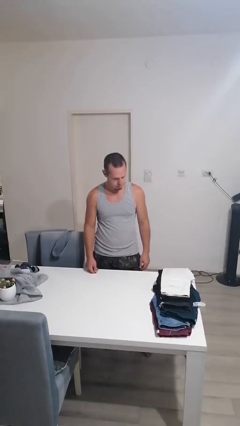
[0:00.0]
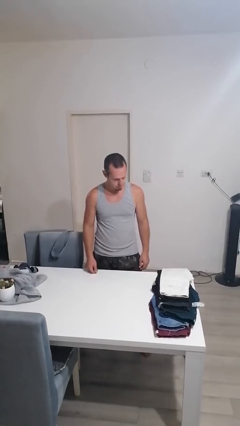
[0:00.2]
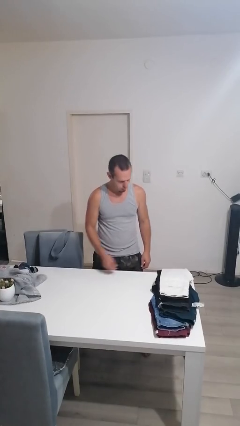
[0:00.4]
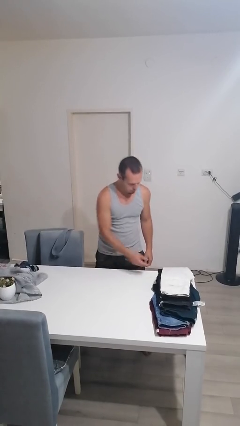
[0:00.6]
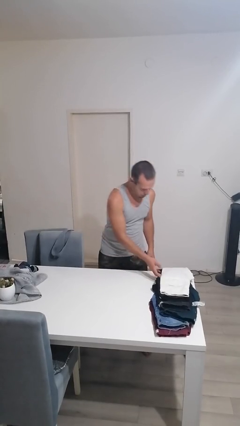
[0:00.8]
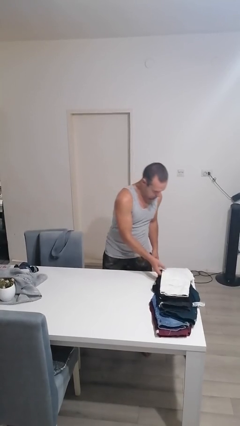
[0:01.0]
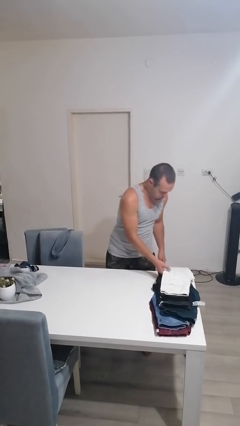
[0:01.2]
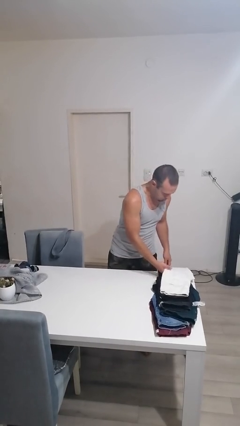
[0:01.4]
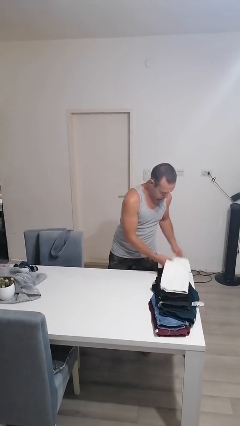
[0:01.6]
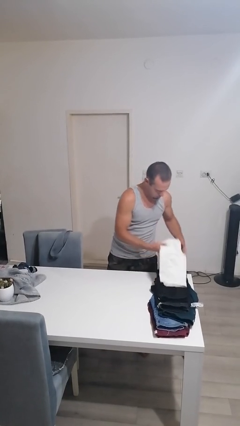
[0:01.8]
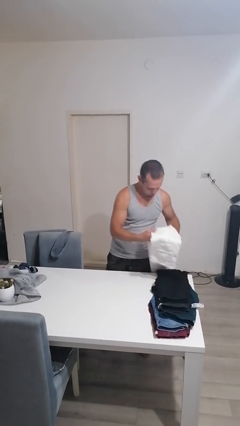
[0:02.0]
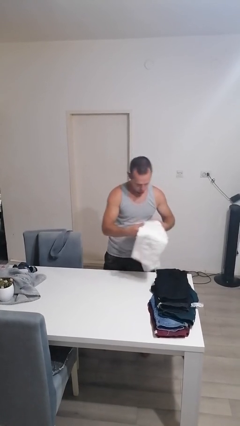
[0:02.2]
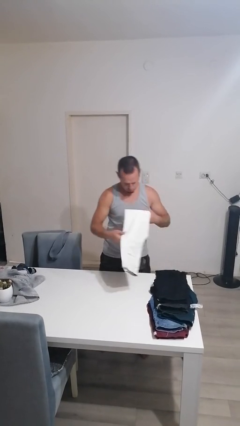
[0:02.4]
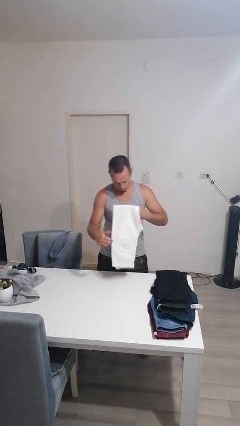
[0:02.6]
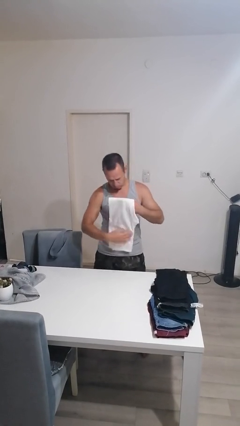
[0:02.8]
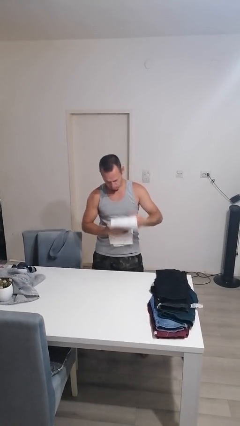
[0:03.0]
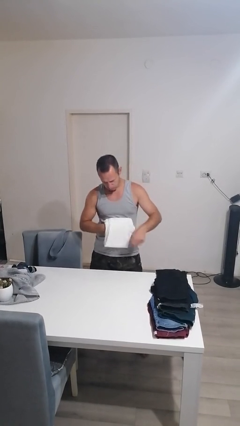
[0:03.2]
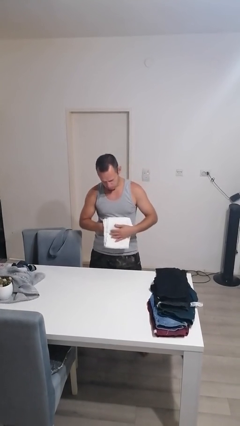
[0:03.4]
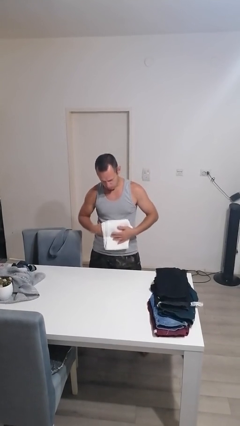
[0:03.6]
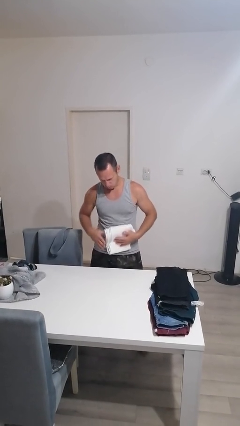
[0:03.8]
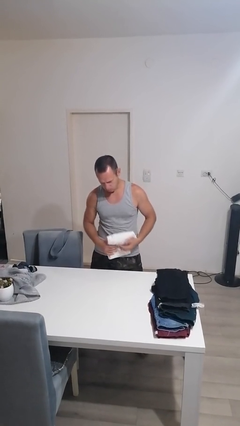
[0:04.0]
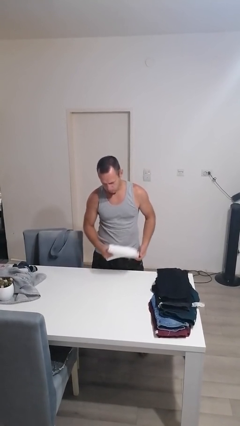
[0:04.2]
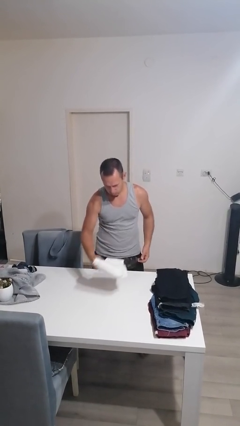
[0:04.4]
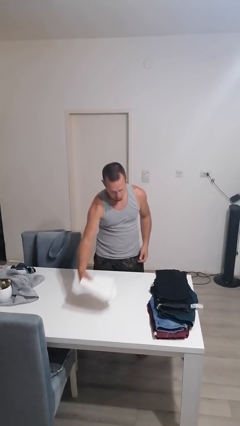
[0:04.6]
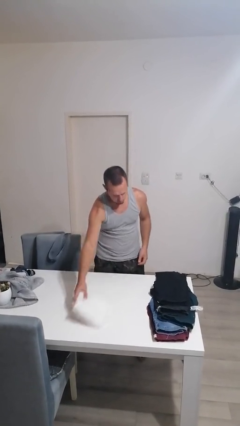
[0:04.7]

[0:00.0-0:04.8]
person folds pants

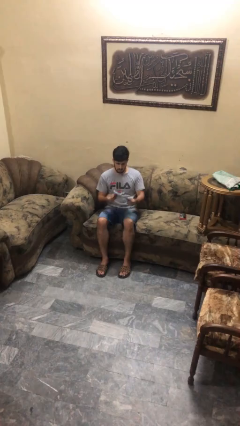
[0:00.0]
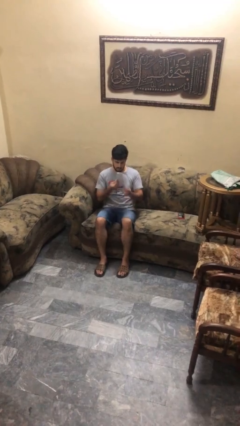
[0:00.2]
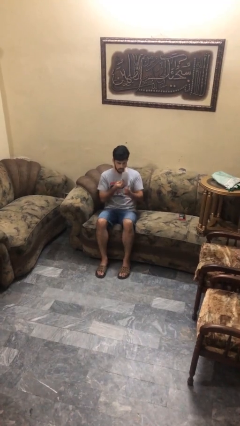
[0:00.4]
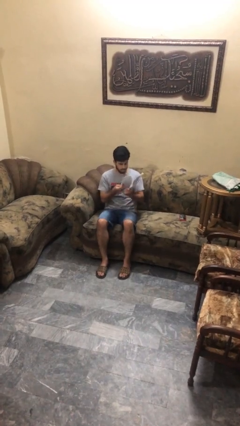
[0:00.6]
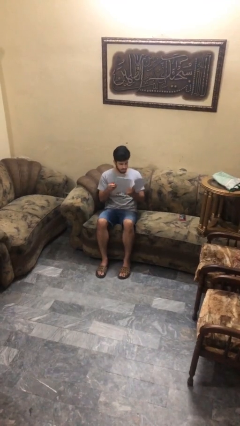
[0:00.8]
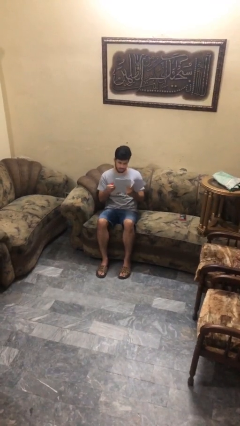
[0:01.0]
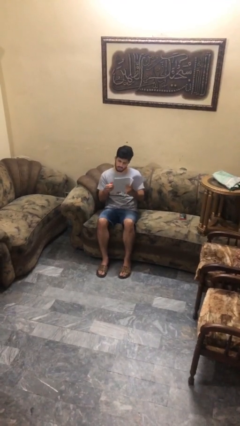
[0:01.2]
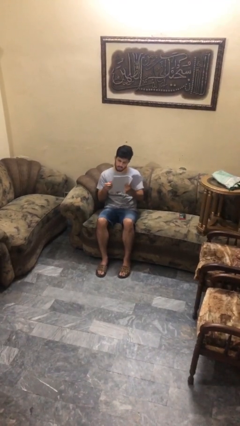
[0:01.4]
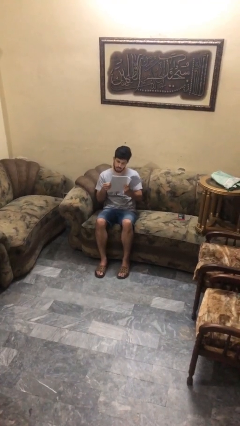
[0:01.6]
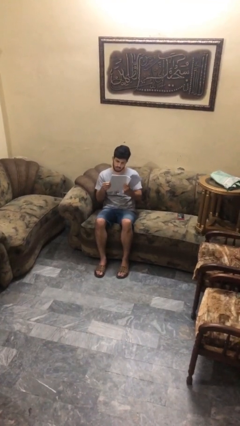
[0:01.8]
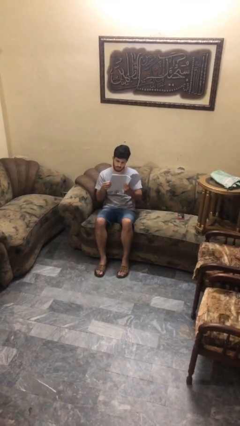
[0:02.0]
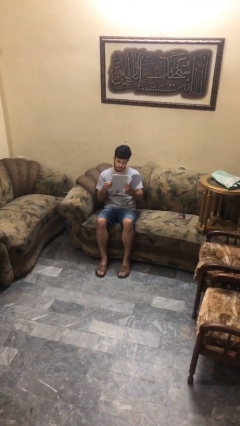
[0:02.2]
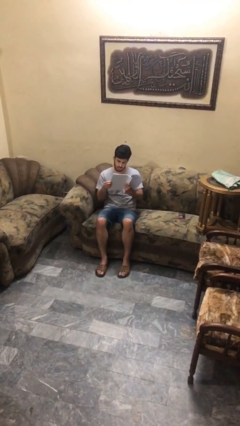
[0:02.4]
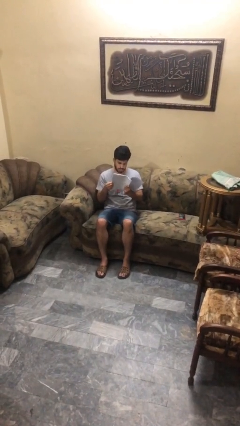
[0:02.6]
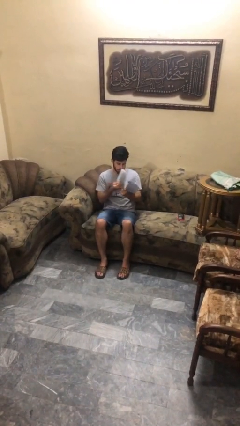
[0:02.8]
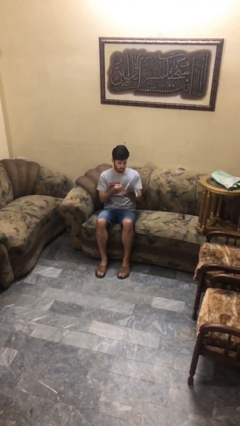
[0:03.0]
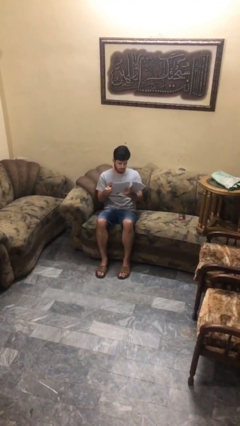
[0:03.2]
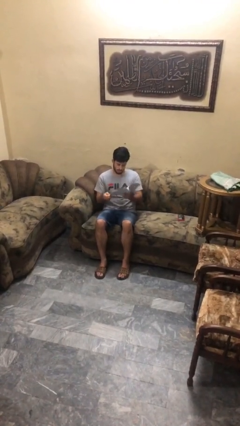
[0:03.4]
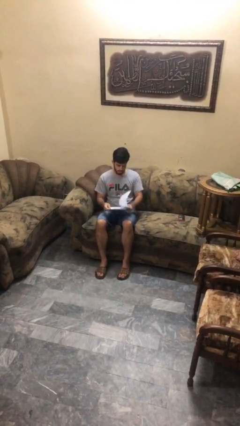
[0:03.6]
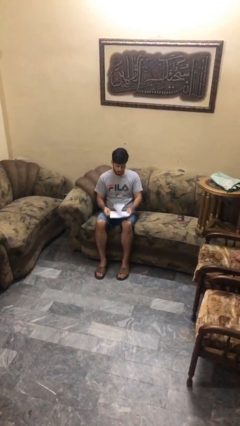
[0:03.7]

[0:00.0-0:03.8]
person reads magazine

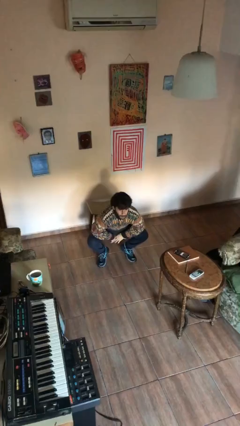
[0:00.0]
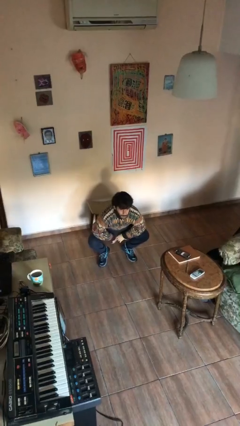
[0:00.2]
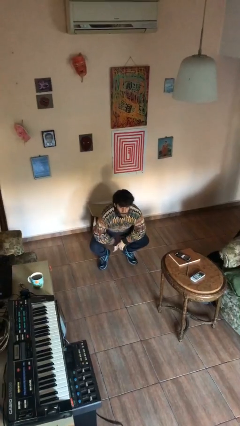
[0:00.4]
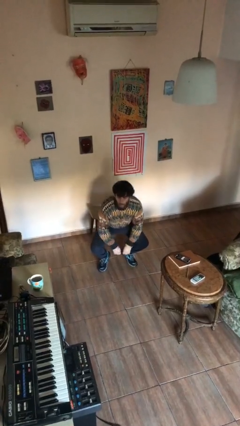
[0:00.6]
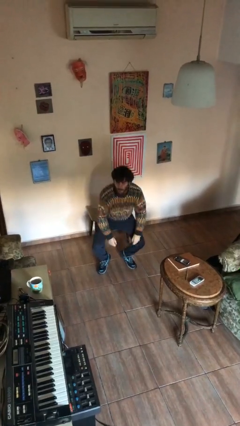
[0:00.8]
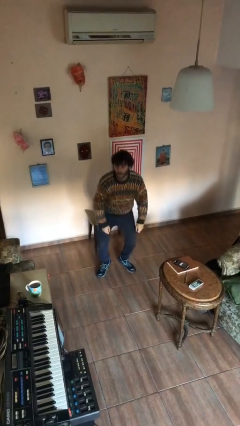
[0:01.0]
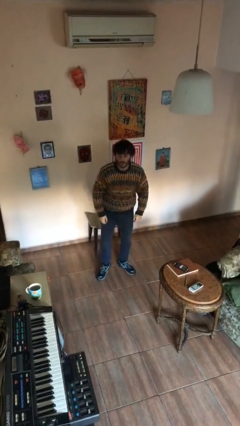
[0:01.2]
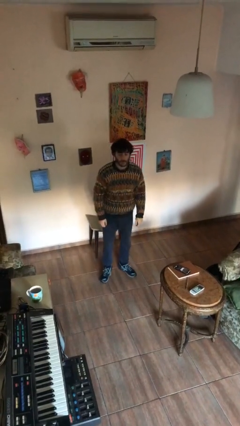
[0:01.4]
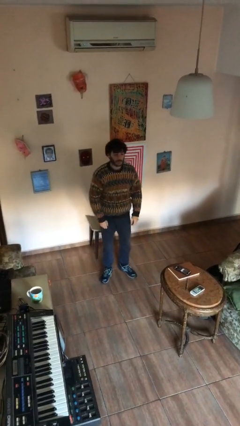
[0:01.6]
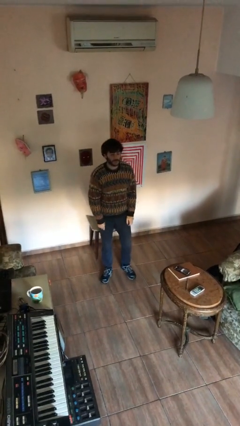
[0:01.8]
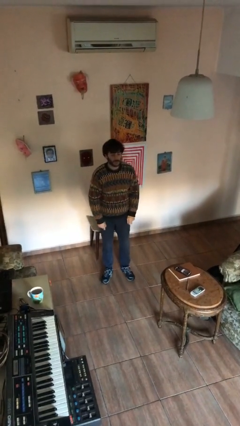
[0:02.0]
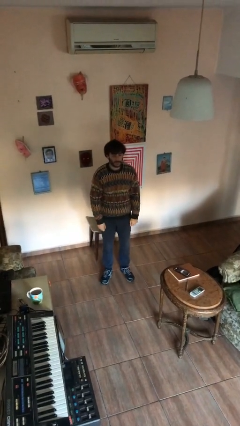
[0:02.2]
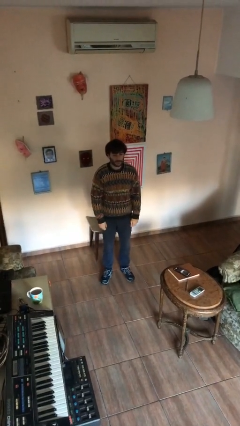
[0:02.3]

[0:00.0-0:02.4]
person stands up

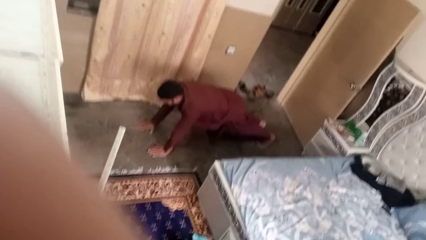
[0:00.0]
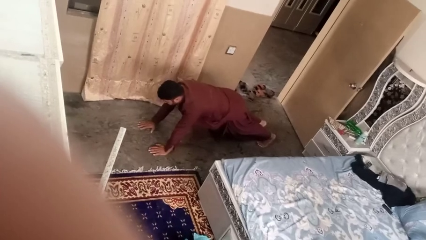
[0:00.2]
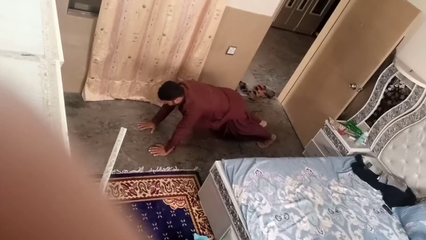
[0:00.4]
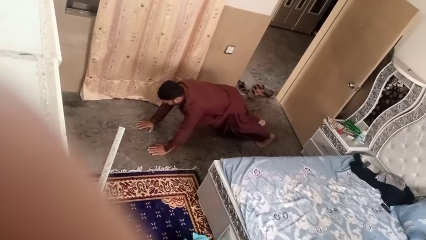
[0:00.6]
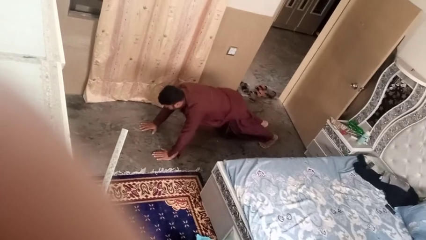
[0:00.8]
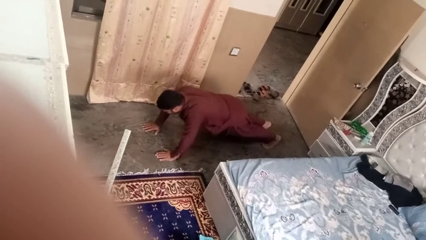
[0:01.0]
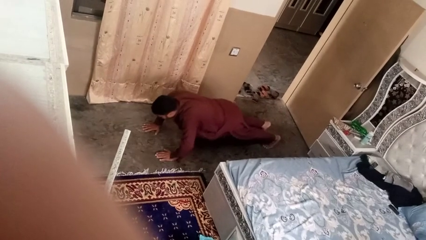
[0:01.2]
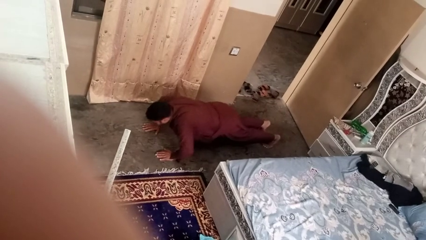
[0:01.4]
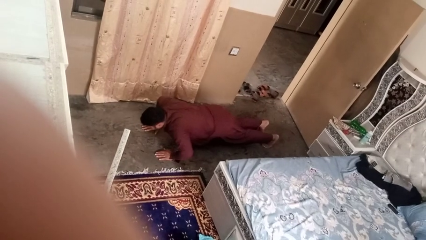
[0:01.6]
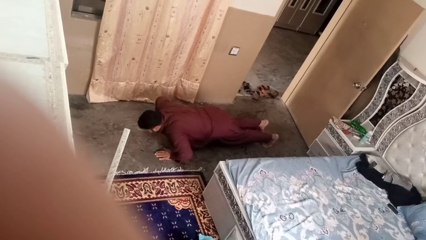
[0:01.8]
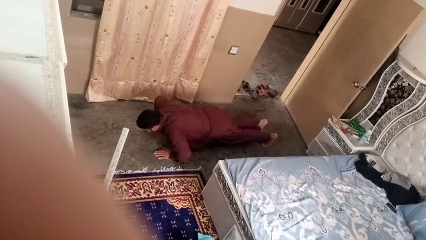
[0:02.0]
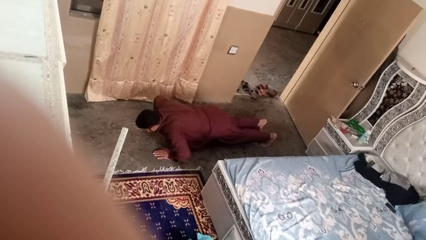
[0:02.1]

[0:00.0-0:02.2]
person exercises with pushup

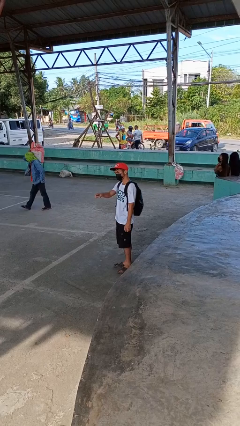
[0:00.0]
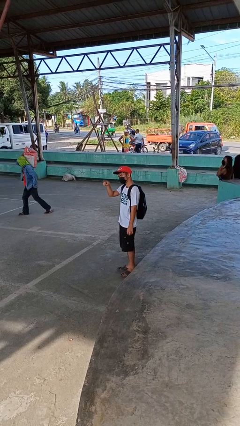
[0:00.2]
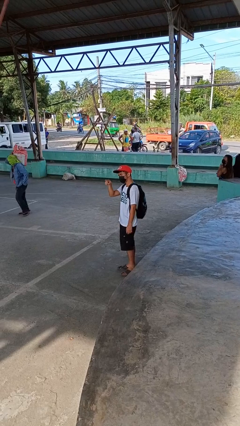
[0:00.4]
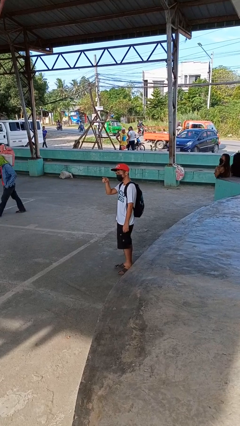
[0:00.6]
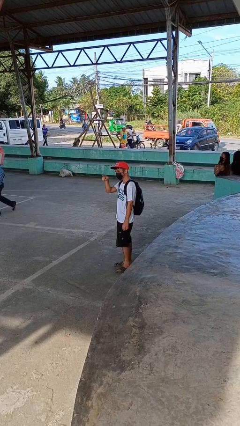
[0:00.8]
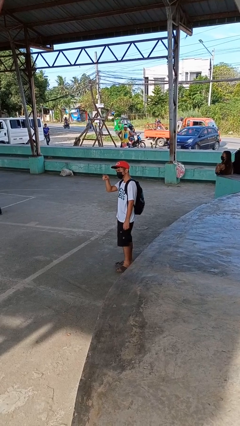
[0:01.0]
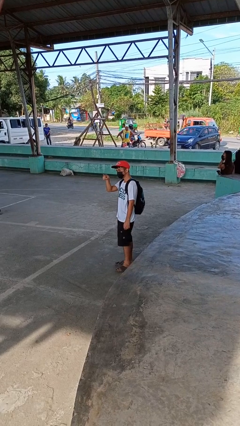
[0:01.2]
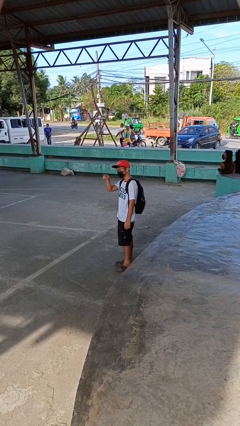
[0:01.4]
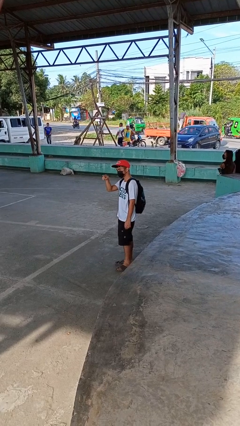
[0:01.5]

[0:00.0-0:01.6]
person points at person

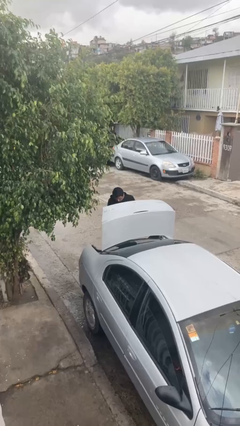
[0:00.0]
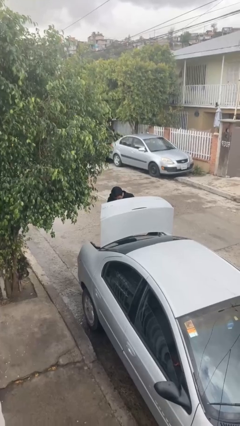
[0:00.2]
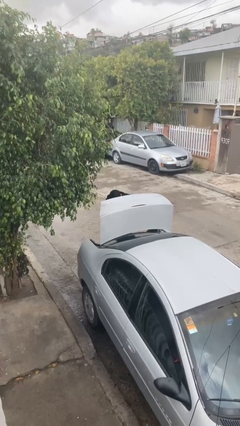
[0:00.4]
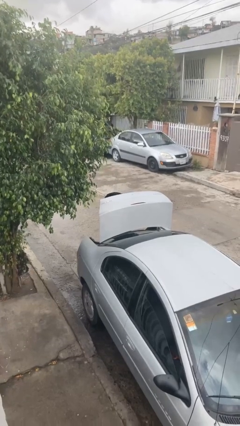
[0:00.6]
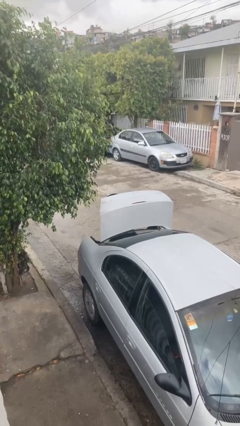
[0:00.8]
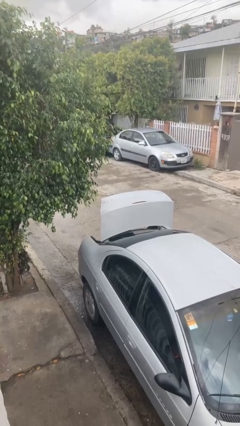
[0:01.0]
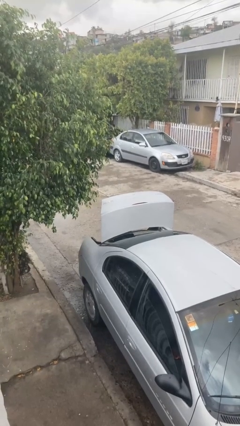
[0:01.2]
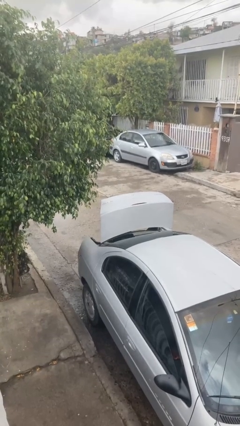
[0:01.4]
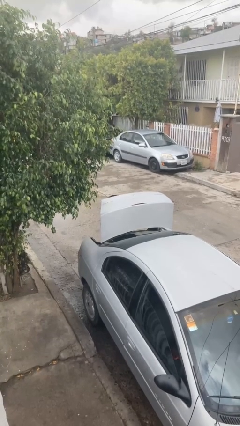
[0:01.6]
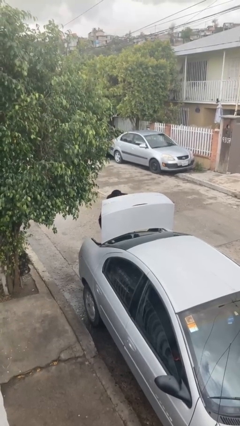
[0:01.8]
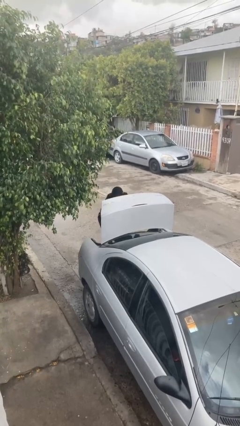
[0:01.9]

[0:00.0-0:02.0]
person loads car

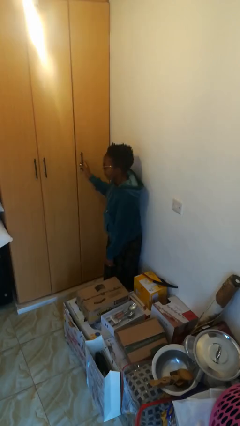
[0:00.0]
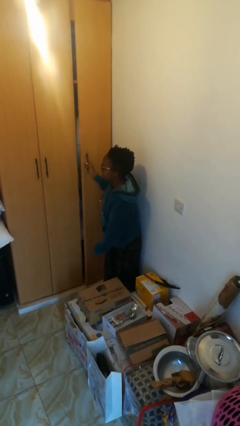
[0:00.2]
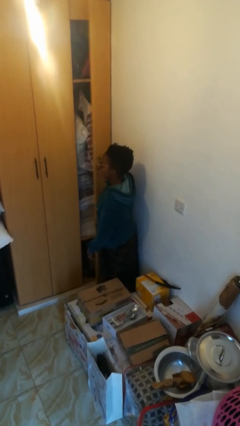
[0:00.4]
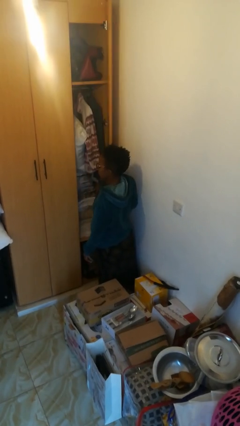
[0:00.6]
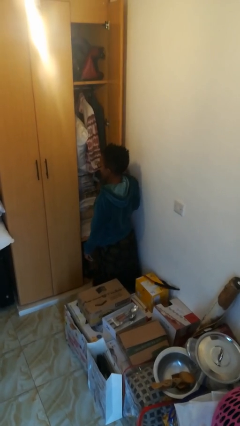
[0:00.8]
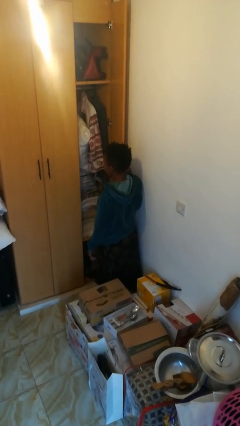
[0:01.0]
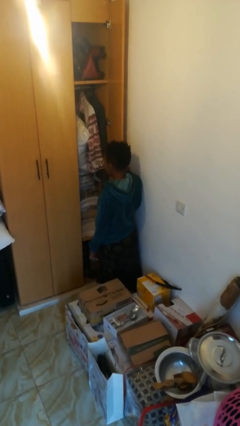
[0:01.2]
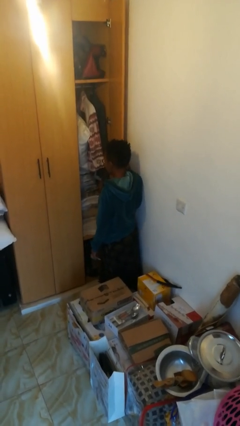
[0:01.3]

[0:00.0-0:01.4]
person opens closet door
